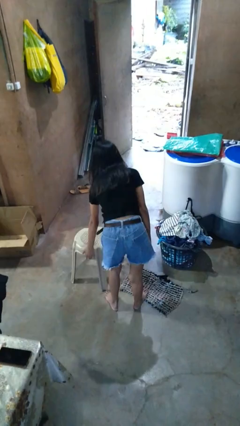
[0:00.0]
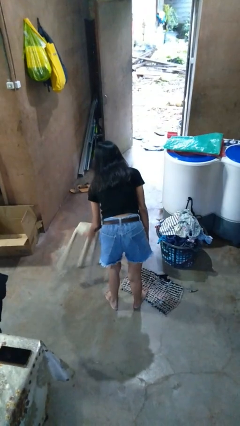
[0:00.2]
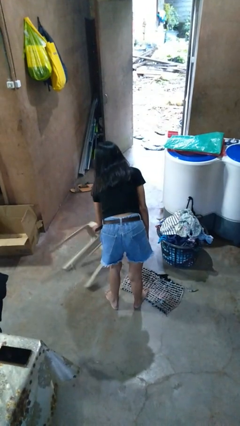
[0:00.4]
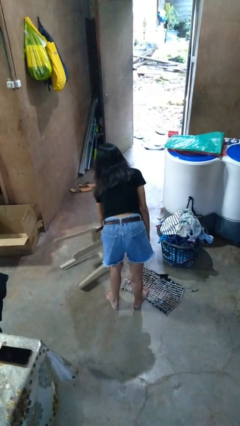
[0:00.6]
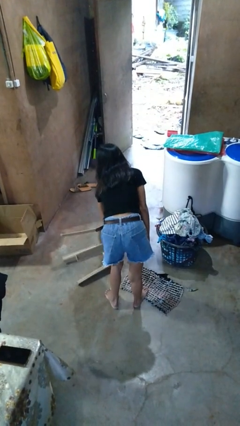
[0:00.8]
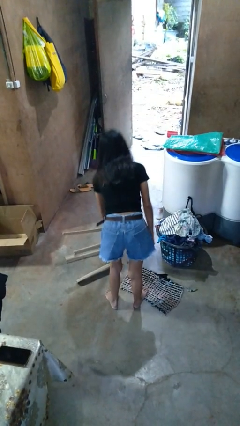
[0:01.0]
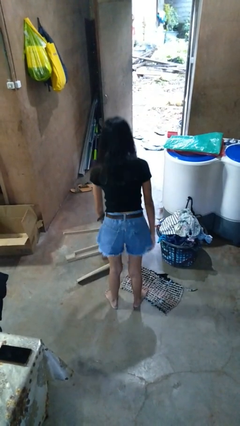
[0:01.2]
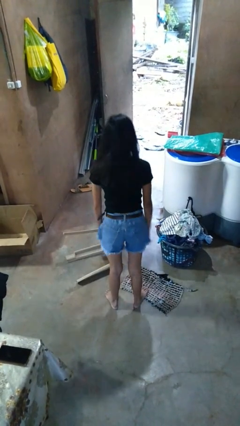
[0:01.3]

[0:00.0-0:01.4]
person knocks over furniture

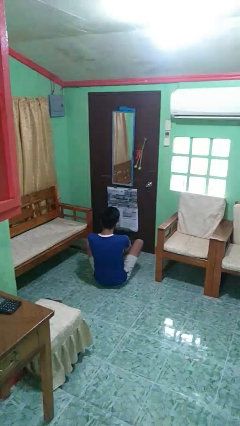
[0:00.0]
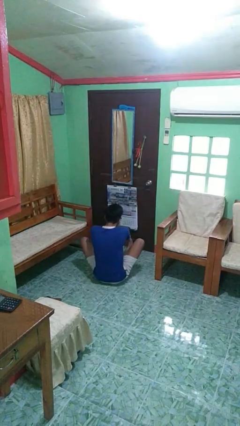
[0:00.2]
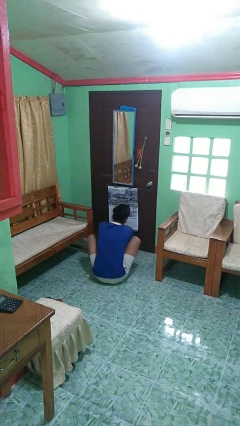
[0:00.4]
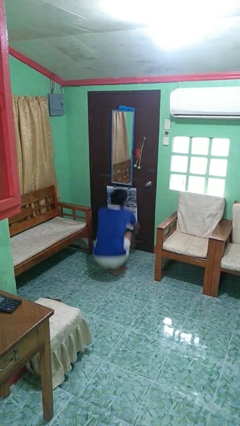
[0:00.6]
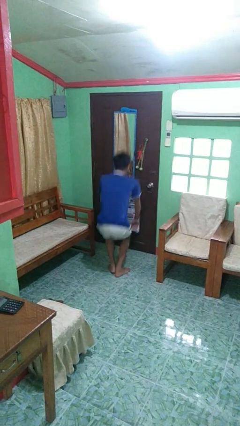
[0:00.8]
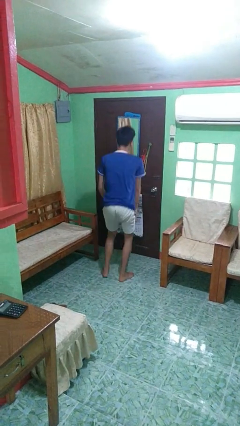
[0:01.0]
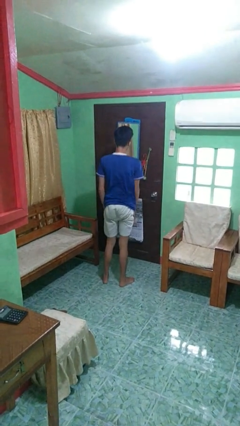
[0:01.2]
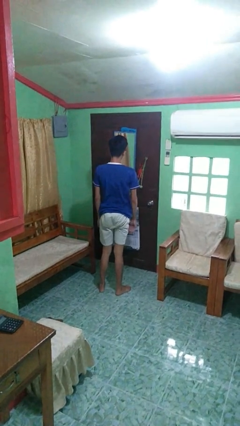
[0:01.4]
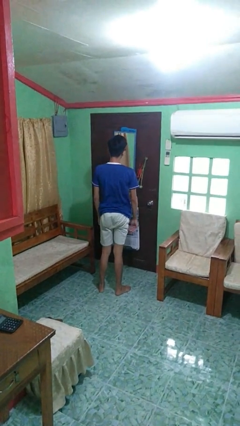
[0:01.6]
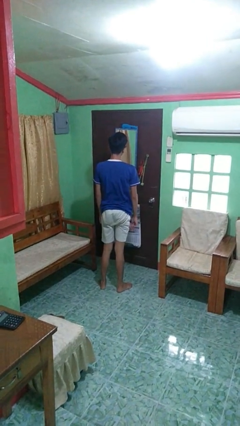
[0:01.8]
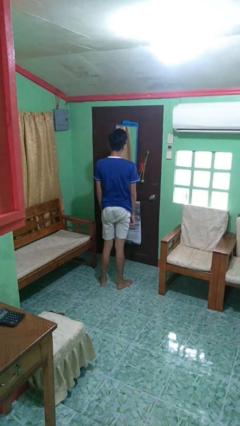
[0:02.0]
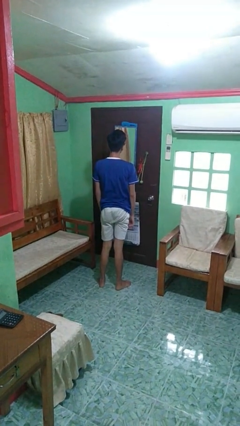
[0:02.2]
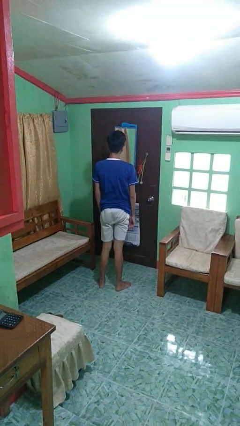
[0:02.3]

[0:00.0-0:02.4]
person stands up

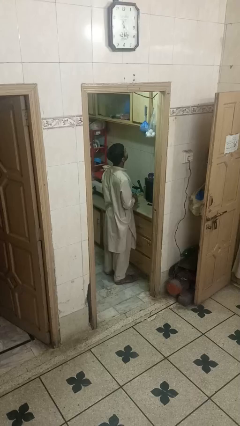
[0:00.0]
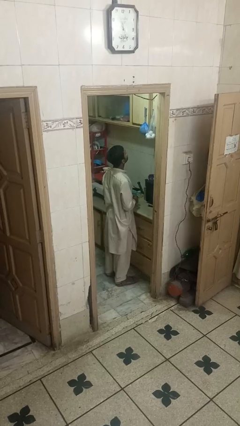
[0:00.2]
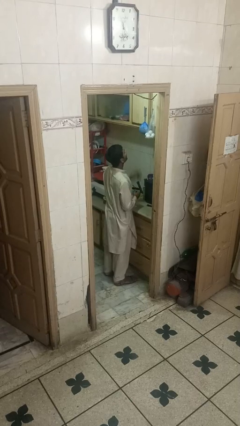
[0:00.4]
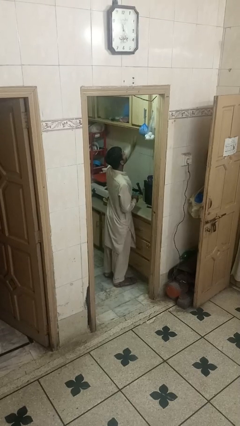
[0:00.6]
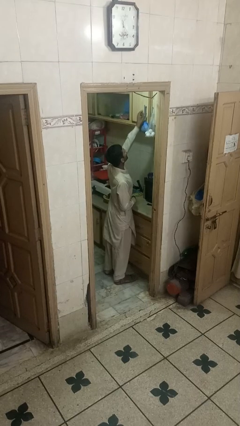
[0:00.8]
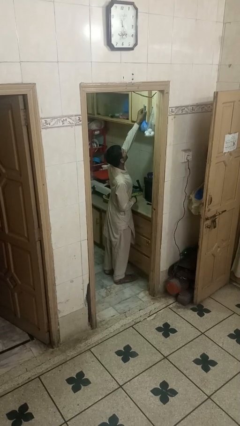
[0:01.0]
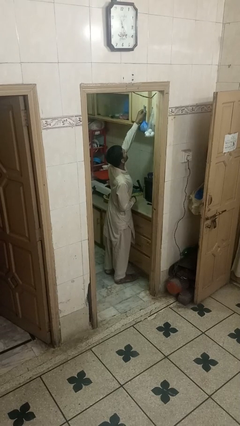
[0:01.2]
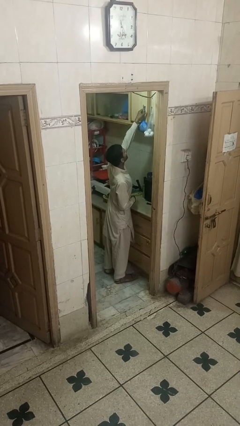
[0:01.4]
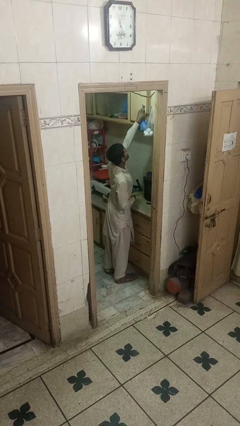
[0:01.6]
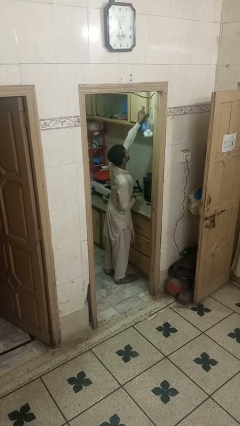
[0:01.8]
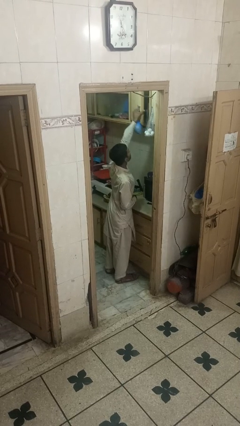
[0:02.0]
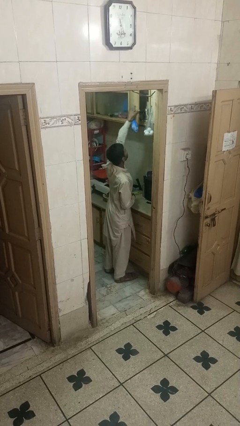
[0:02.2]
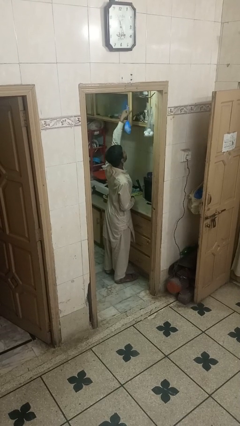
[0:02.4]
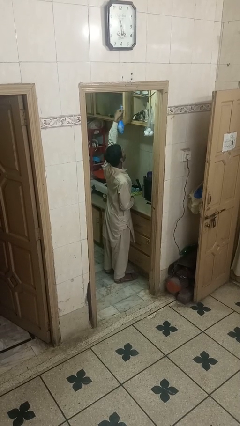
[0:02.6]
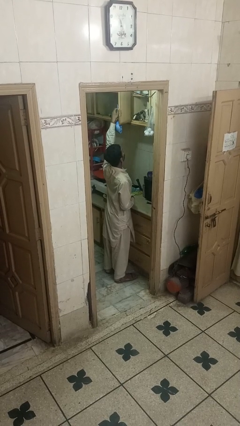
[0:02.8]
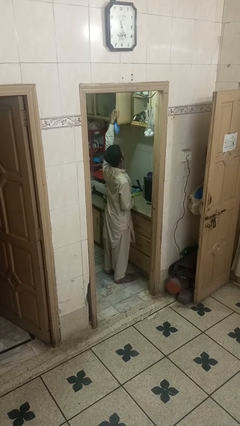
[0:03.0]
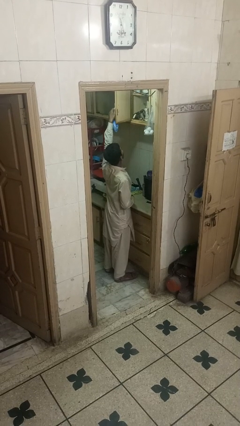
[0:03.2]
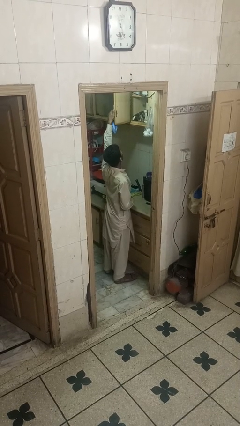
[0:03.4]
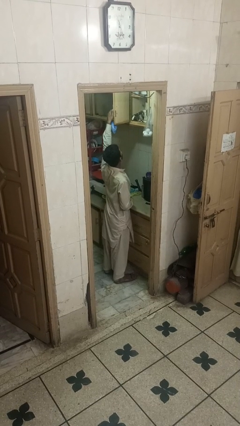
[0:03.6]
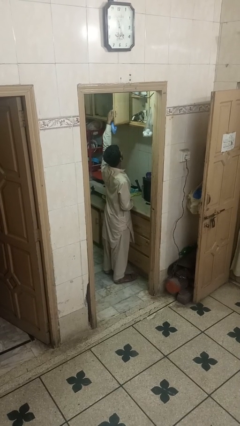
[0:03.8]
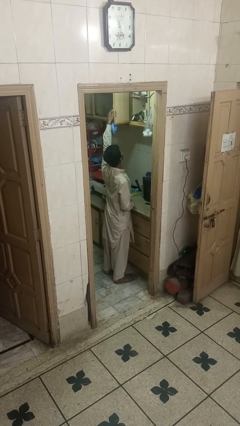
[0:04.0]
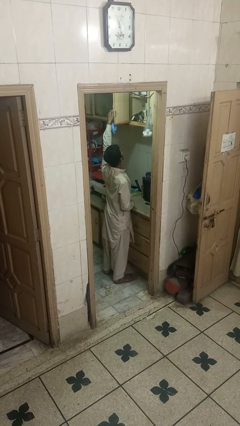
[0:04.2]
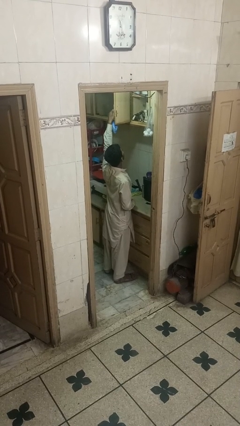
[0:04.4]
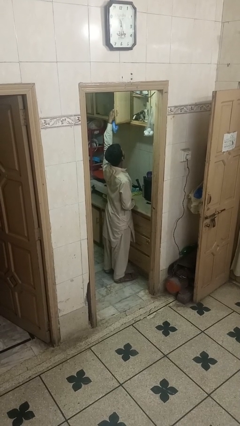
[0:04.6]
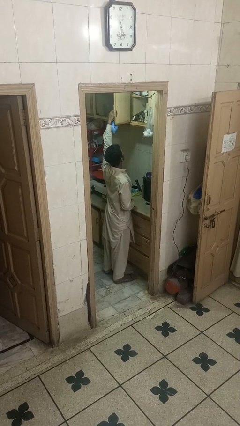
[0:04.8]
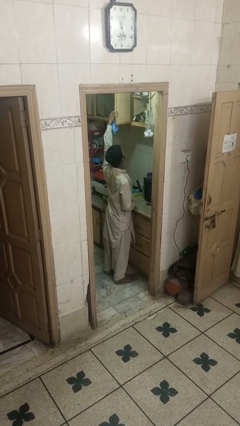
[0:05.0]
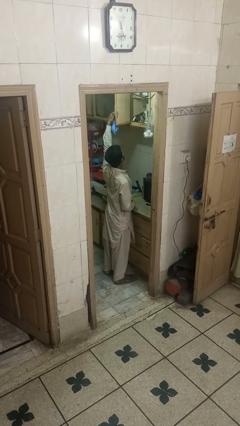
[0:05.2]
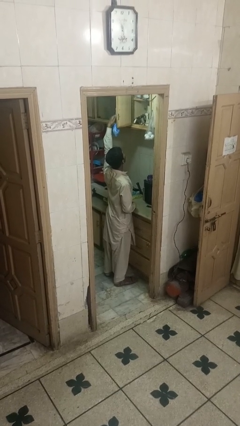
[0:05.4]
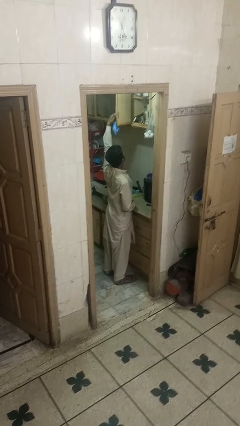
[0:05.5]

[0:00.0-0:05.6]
person opens cabinet

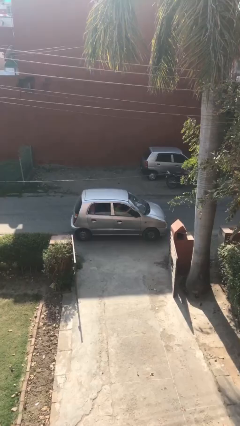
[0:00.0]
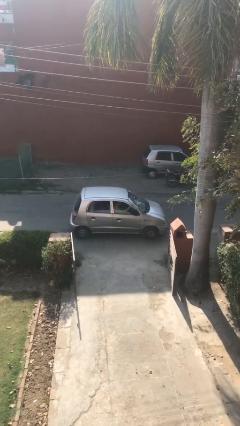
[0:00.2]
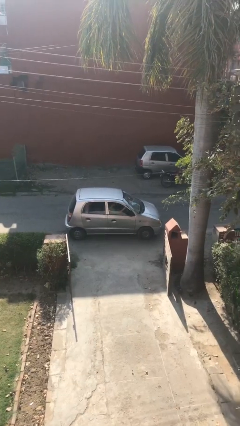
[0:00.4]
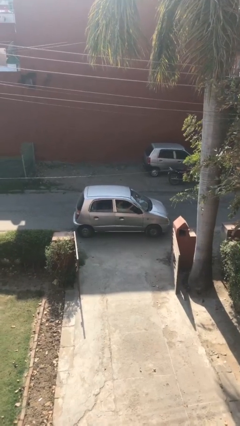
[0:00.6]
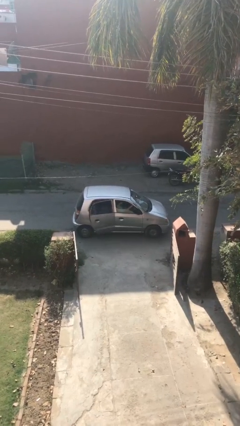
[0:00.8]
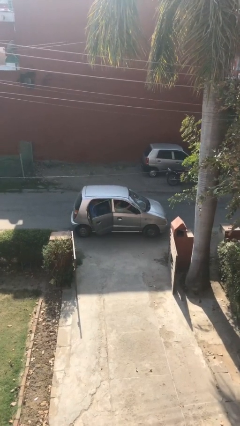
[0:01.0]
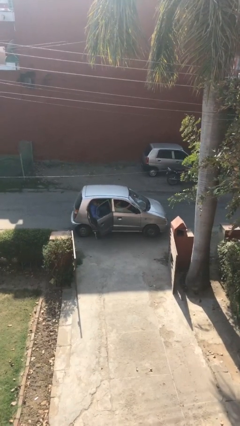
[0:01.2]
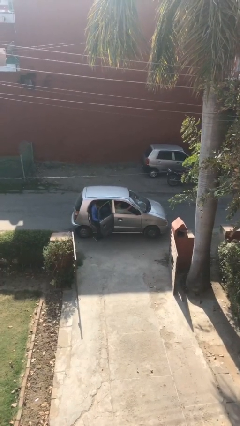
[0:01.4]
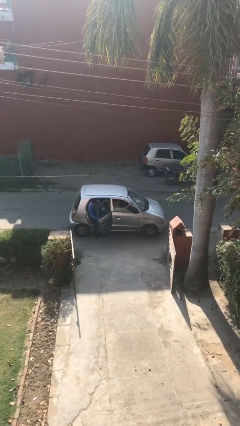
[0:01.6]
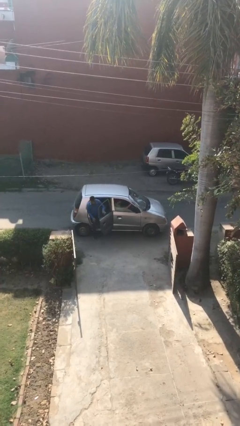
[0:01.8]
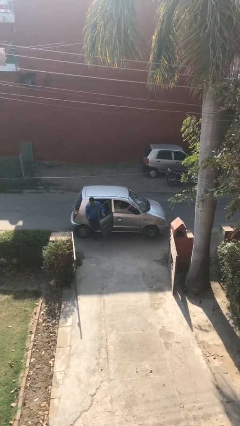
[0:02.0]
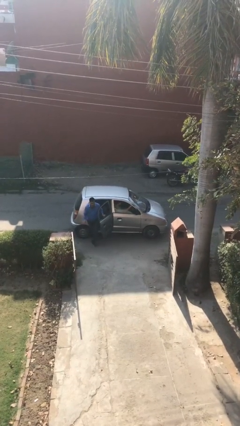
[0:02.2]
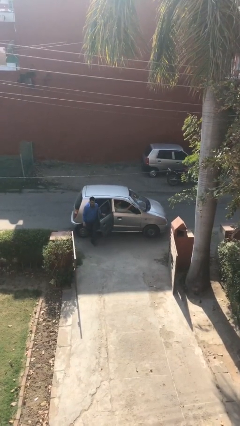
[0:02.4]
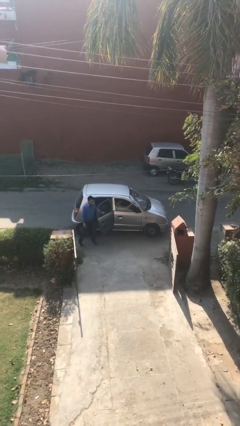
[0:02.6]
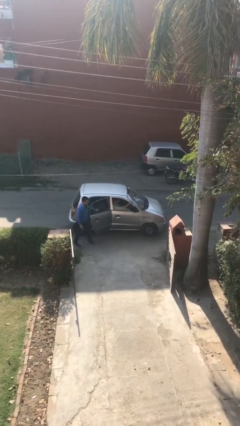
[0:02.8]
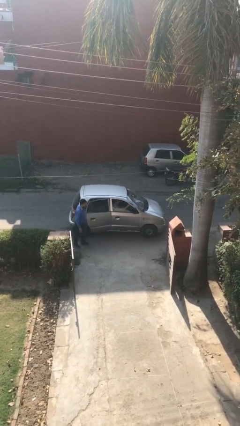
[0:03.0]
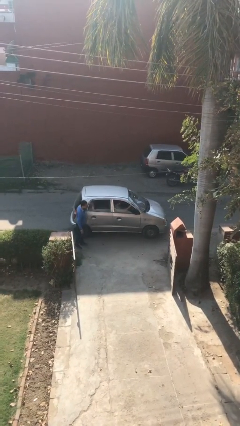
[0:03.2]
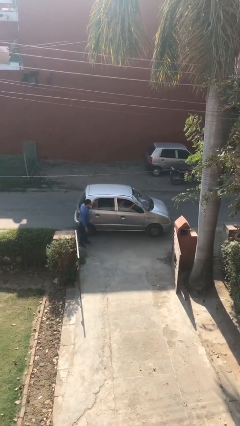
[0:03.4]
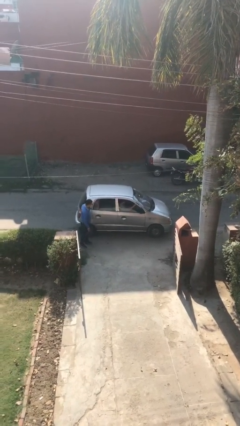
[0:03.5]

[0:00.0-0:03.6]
car drops off person

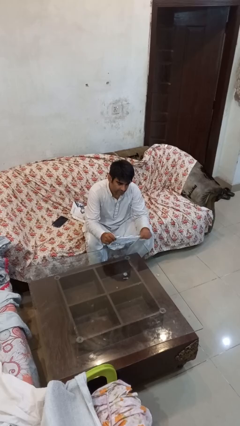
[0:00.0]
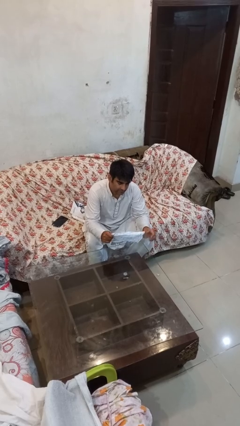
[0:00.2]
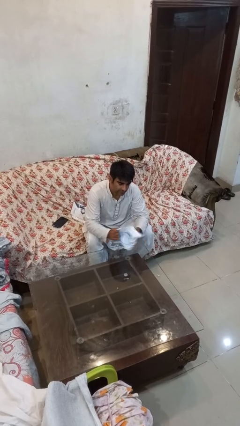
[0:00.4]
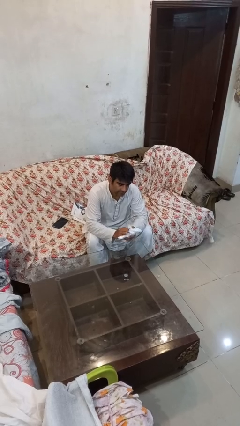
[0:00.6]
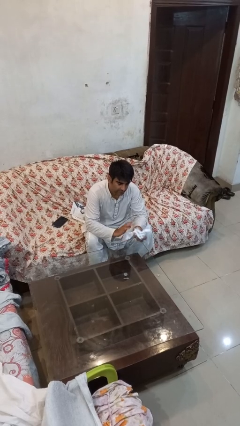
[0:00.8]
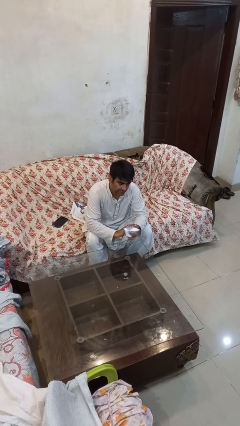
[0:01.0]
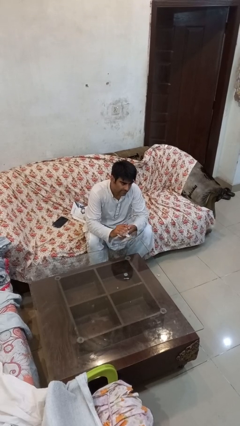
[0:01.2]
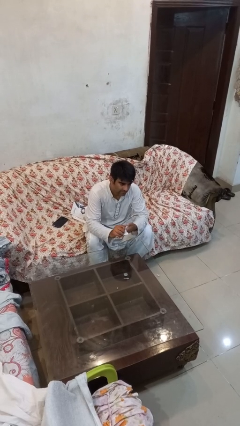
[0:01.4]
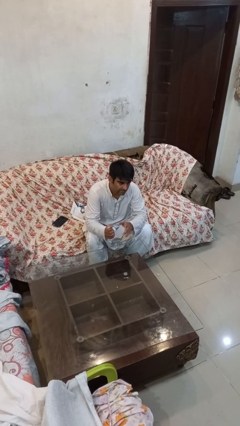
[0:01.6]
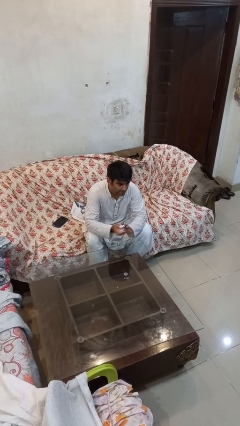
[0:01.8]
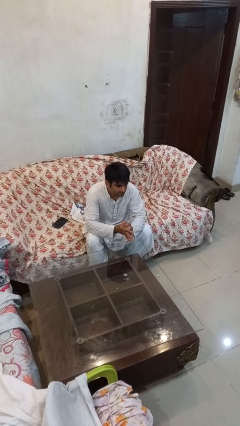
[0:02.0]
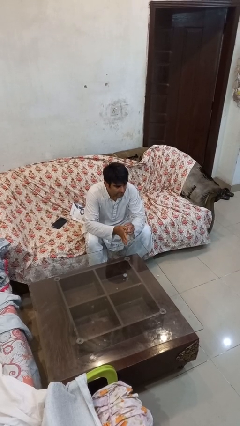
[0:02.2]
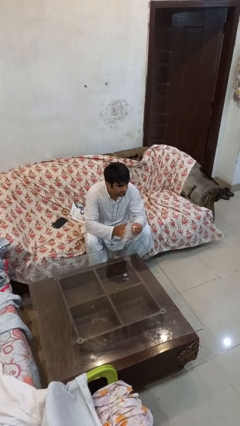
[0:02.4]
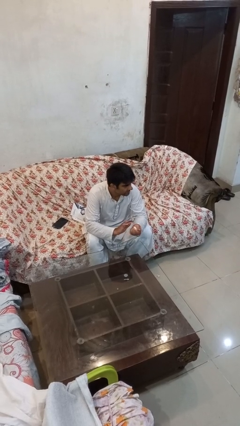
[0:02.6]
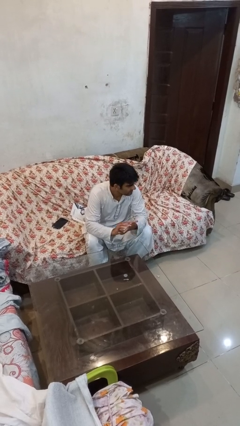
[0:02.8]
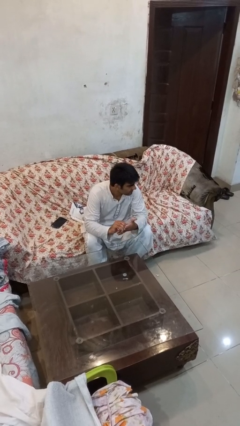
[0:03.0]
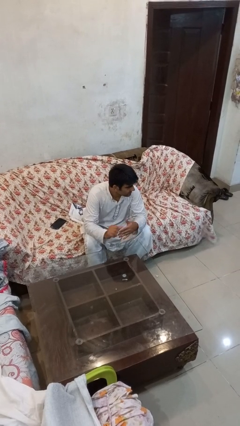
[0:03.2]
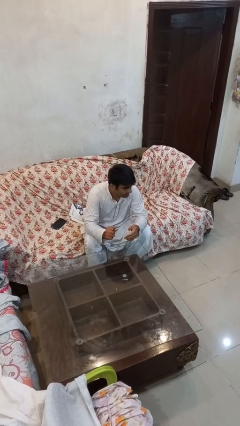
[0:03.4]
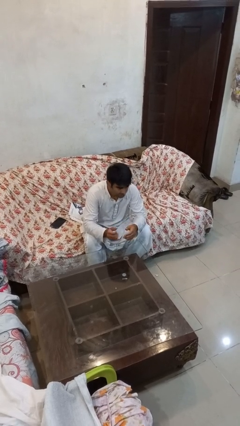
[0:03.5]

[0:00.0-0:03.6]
person crumples paper

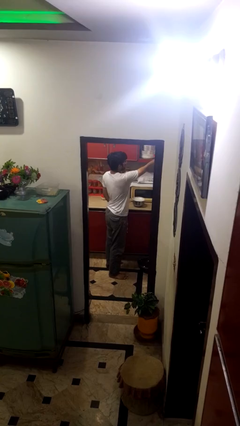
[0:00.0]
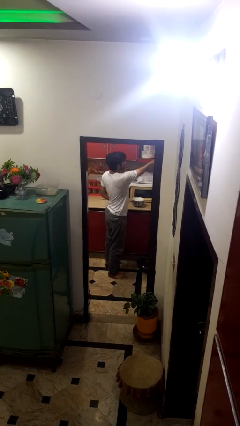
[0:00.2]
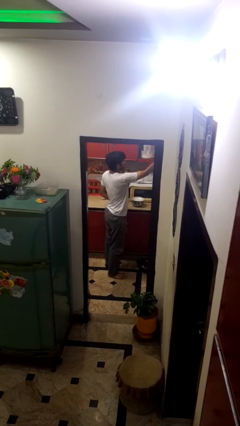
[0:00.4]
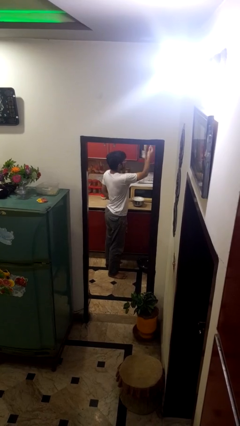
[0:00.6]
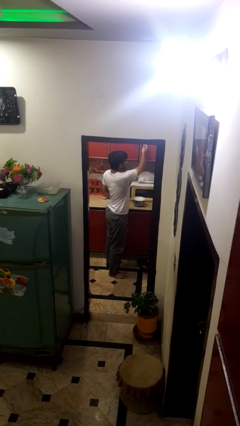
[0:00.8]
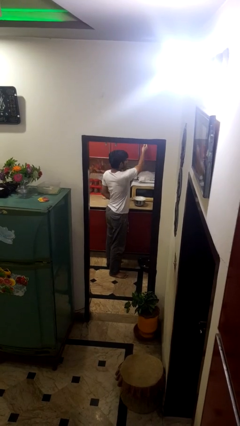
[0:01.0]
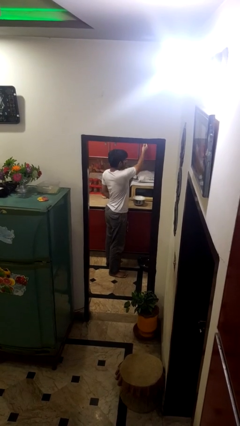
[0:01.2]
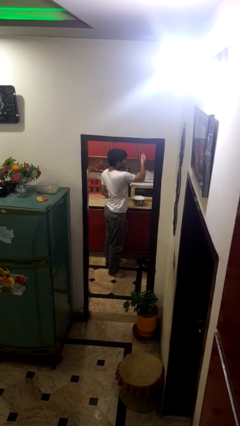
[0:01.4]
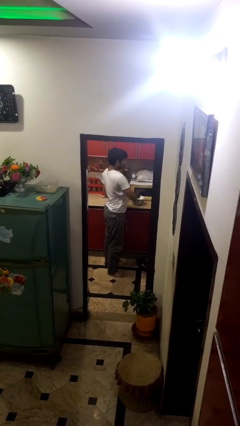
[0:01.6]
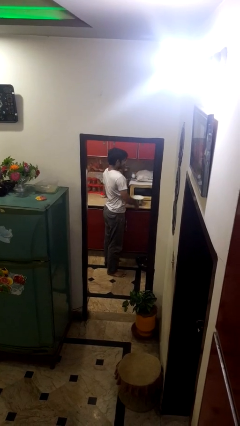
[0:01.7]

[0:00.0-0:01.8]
person closes cabinet
